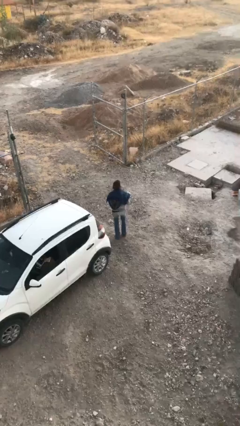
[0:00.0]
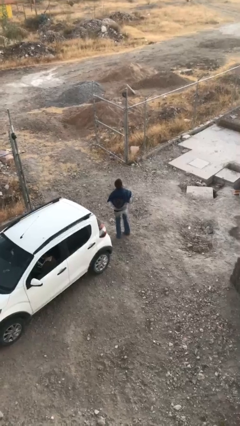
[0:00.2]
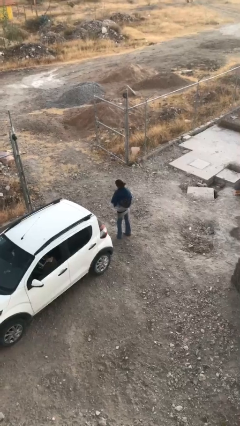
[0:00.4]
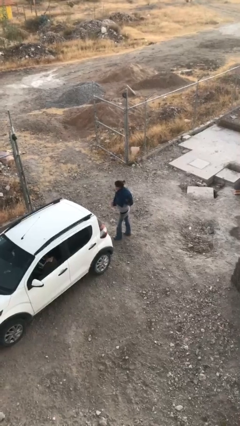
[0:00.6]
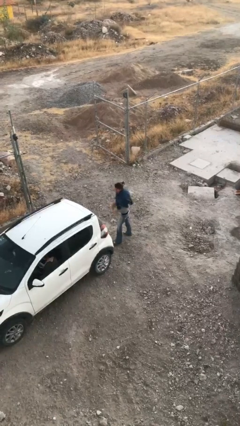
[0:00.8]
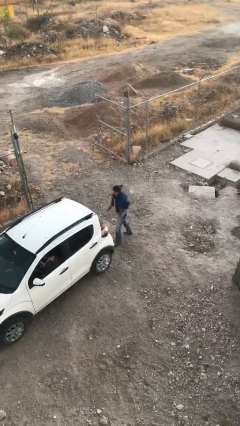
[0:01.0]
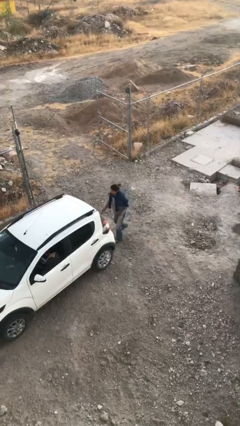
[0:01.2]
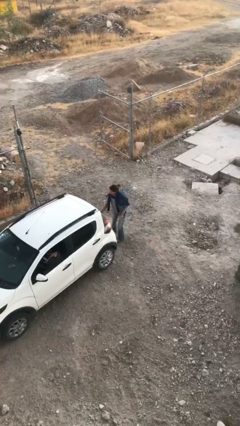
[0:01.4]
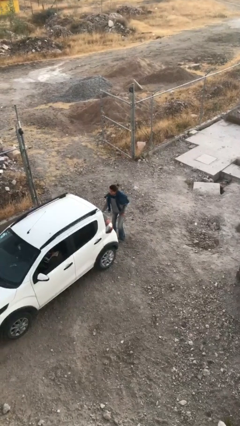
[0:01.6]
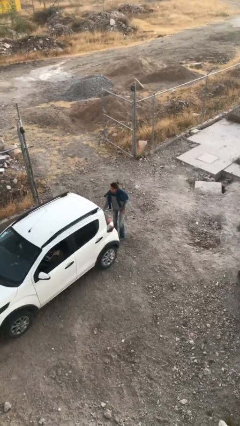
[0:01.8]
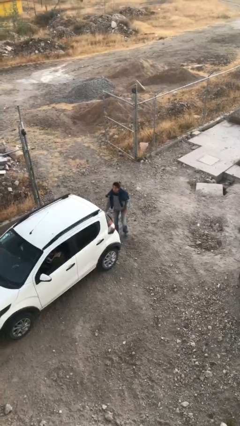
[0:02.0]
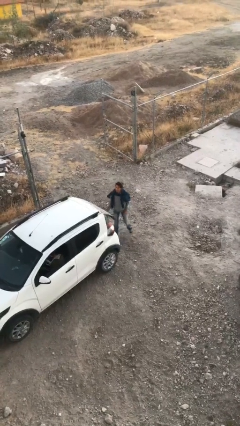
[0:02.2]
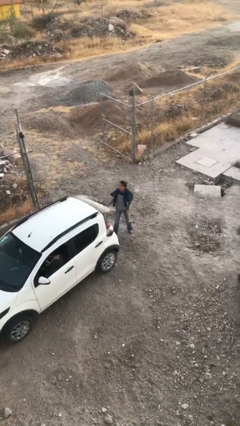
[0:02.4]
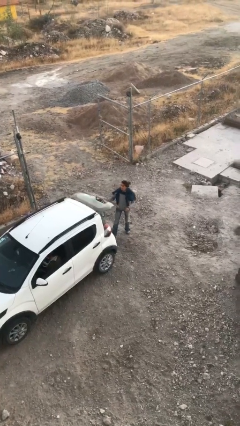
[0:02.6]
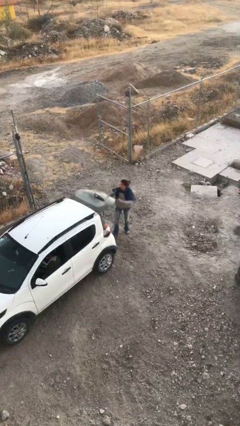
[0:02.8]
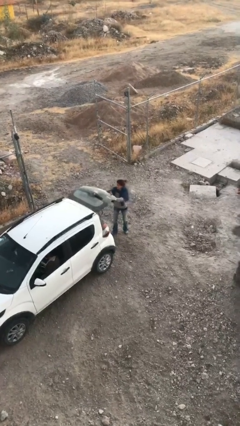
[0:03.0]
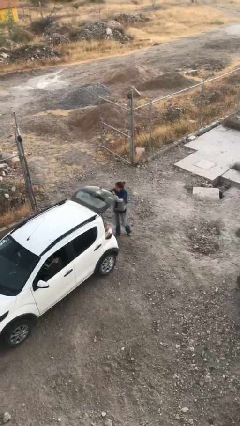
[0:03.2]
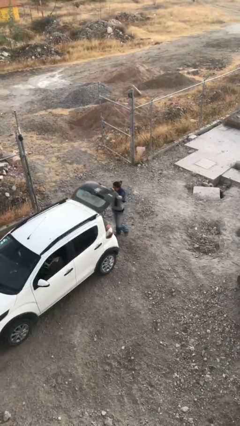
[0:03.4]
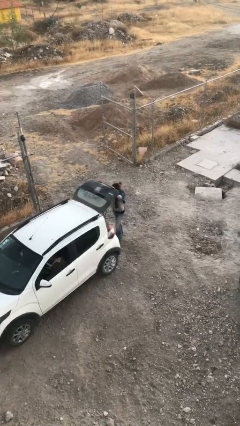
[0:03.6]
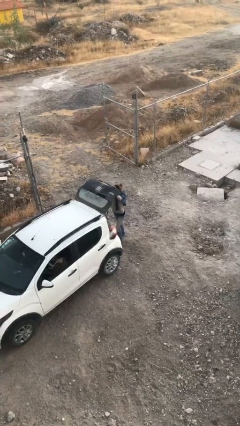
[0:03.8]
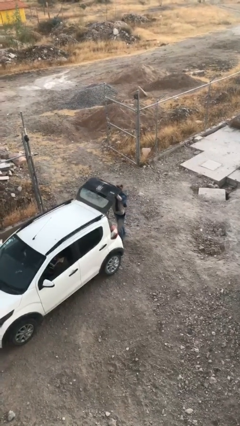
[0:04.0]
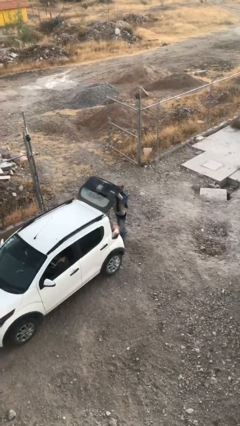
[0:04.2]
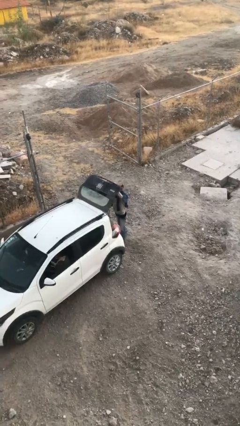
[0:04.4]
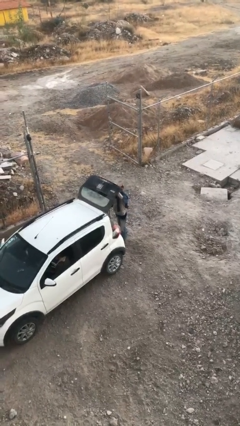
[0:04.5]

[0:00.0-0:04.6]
person opens car trunk

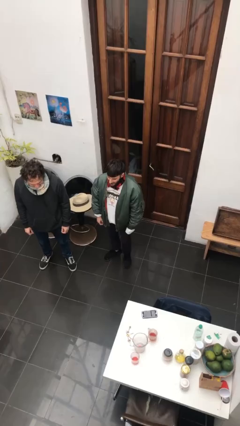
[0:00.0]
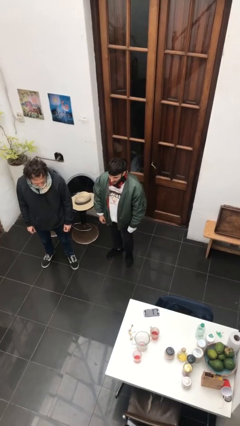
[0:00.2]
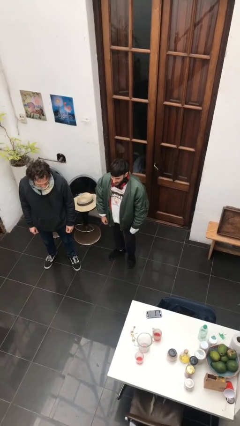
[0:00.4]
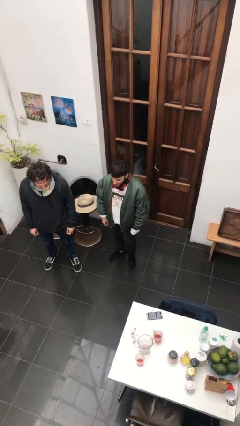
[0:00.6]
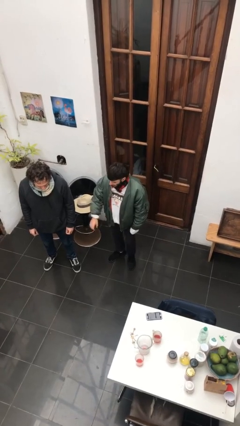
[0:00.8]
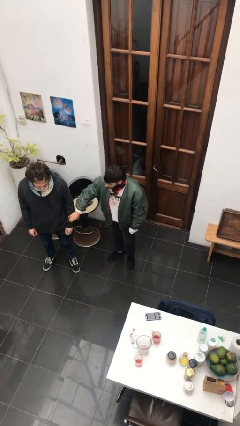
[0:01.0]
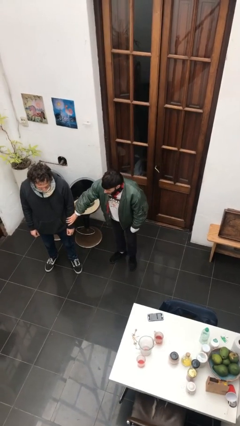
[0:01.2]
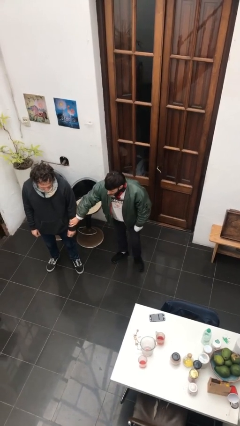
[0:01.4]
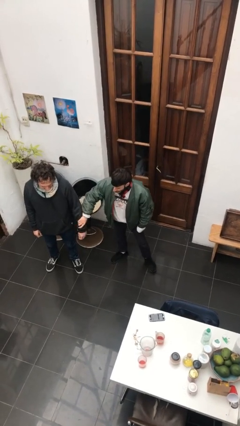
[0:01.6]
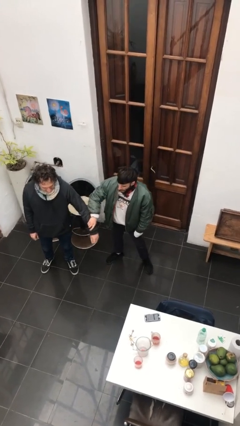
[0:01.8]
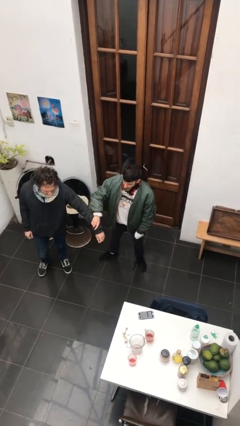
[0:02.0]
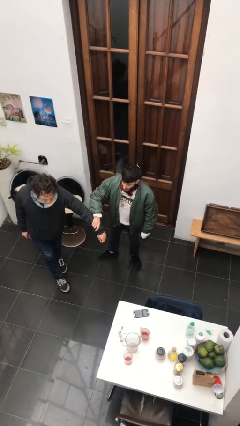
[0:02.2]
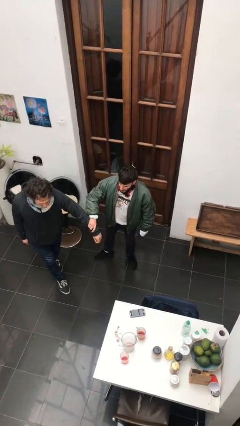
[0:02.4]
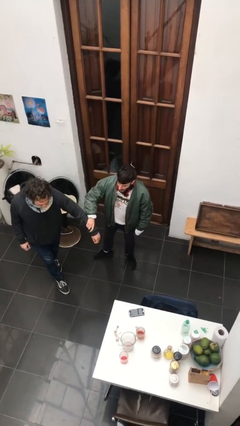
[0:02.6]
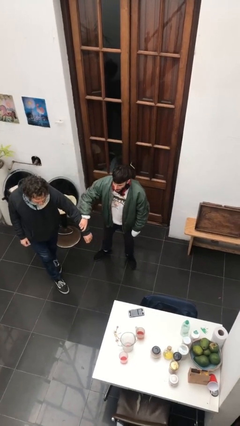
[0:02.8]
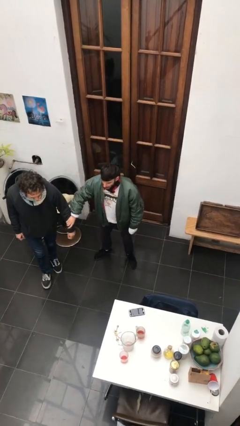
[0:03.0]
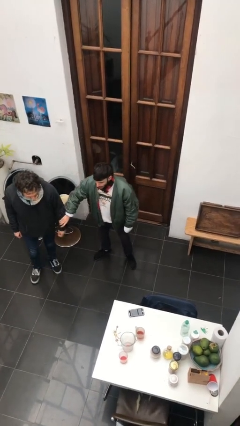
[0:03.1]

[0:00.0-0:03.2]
person grabs person by forearm

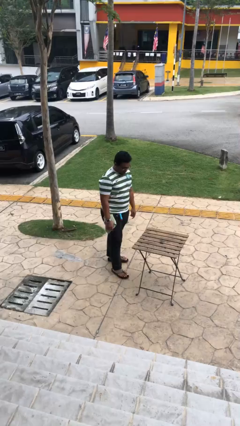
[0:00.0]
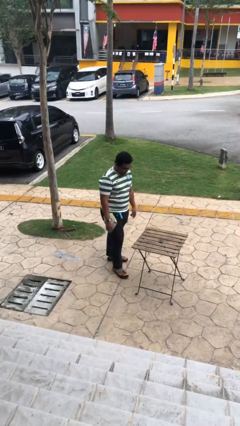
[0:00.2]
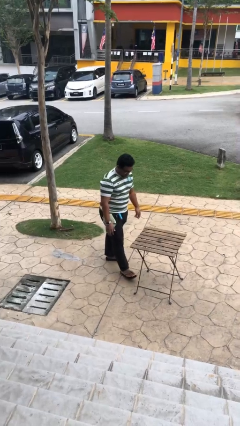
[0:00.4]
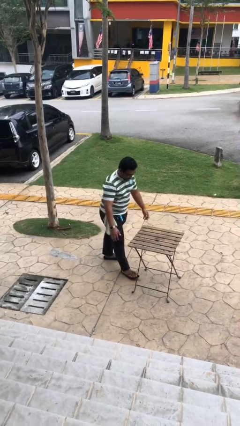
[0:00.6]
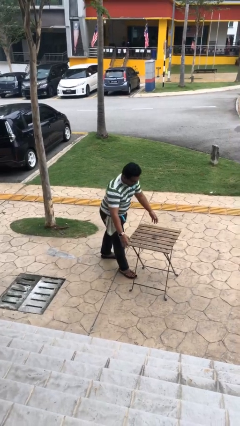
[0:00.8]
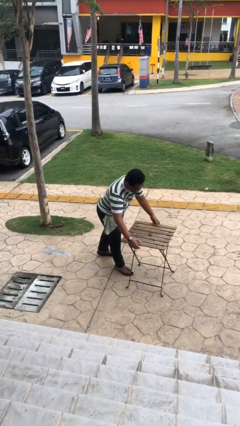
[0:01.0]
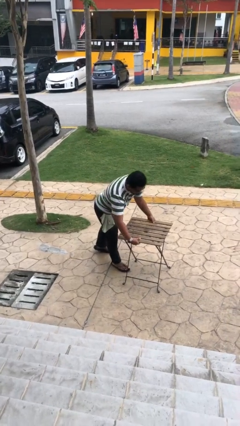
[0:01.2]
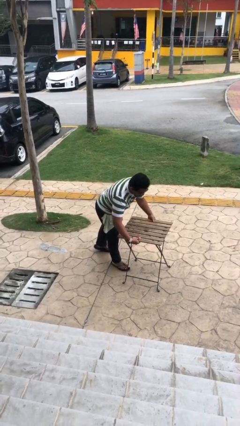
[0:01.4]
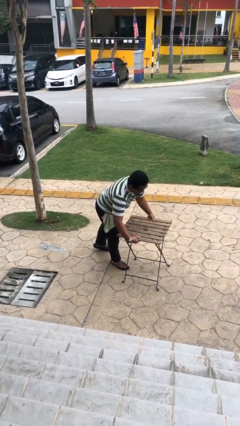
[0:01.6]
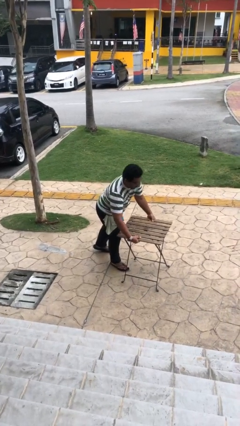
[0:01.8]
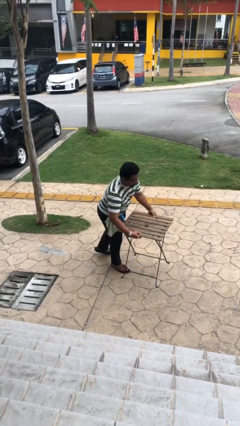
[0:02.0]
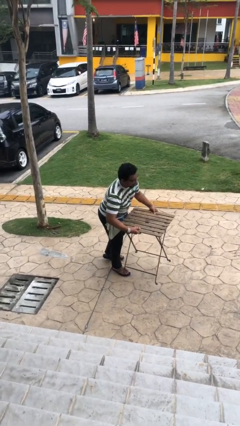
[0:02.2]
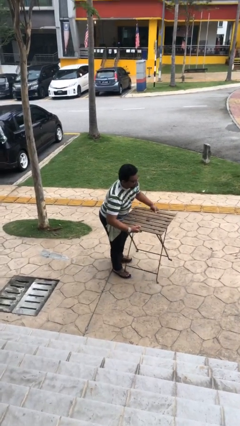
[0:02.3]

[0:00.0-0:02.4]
person picks up object from floor

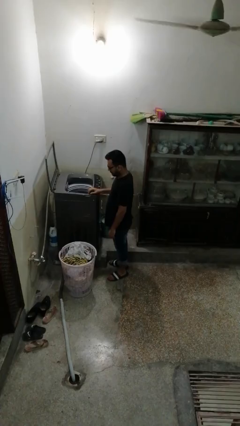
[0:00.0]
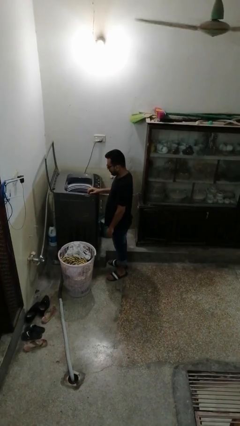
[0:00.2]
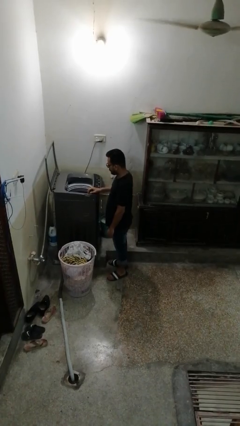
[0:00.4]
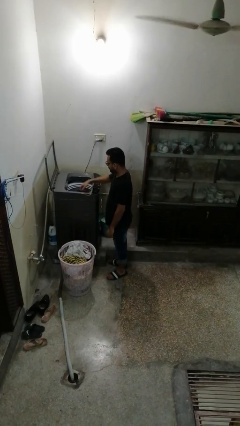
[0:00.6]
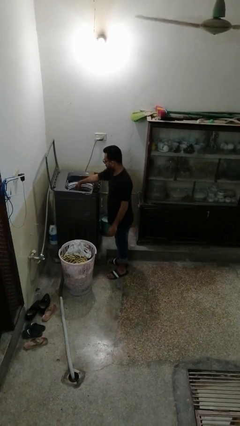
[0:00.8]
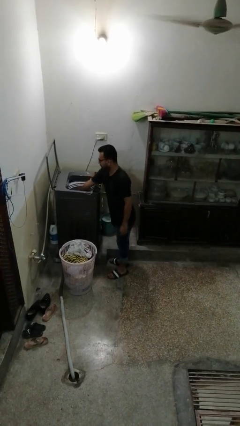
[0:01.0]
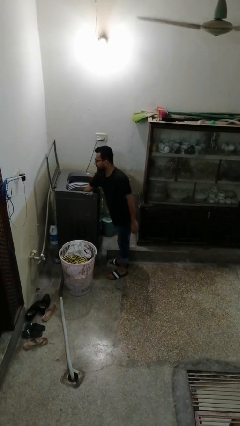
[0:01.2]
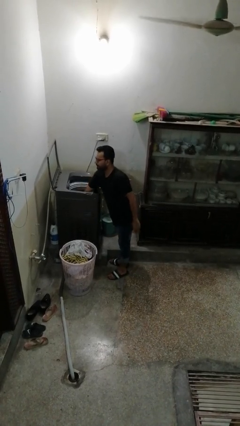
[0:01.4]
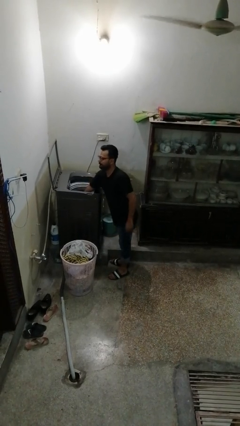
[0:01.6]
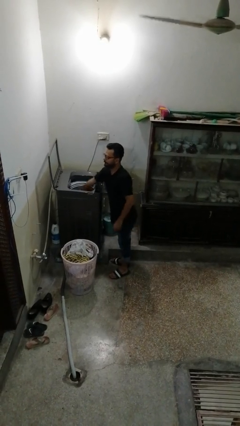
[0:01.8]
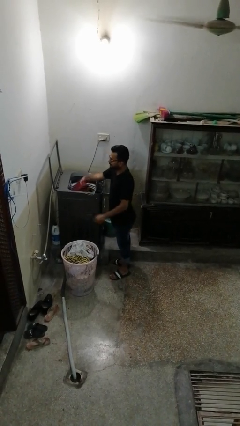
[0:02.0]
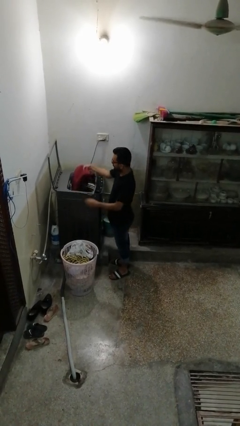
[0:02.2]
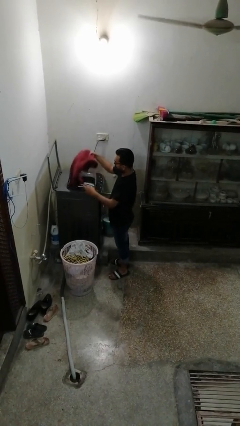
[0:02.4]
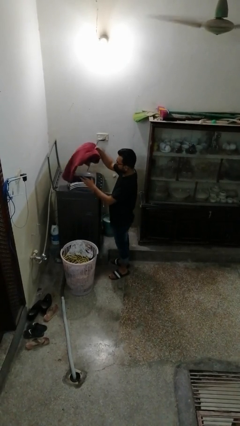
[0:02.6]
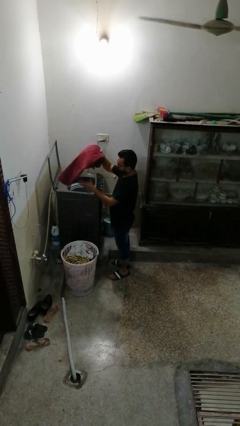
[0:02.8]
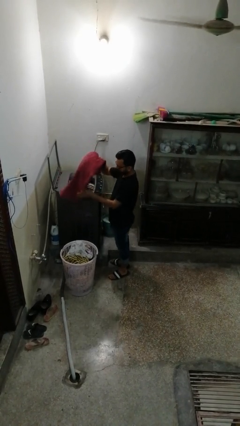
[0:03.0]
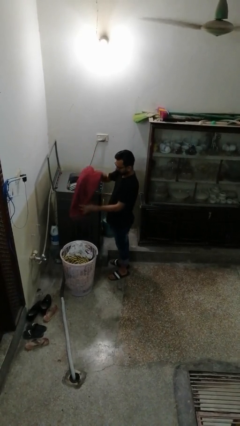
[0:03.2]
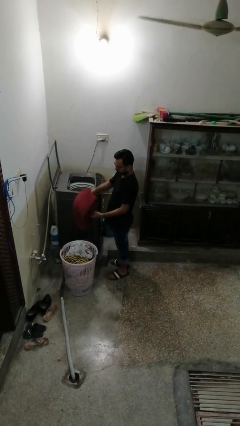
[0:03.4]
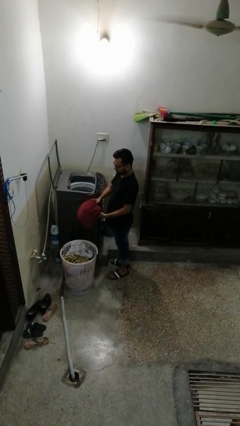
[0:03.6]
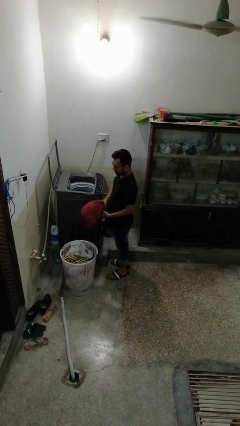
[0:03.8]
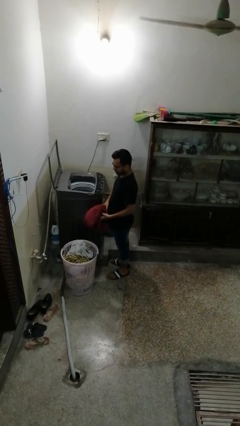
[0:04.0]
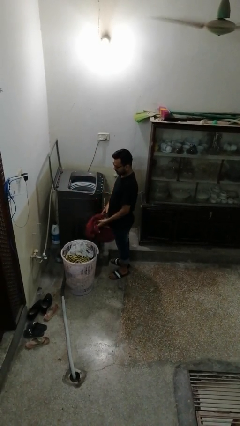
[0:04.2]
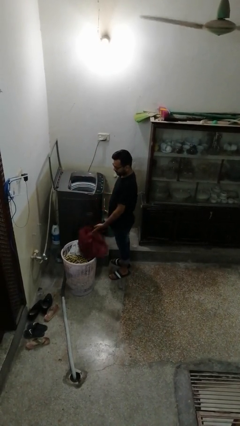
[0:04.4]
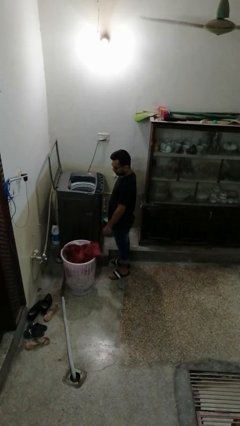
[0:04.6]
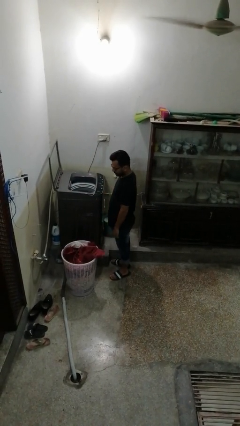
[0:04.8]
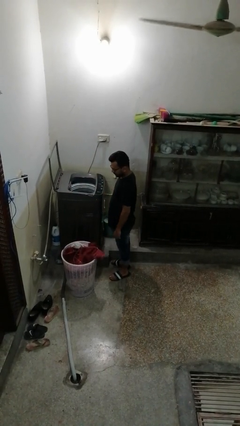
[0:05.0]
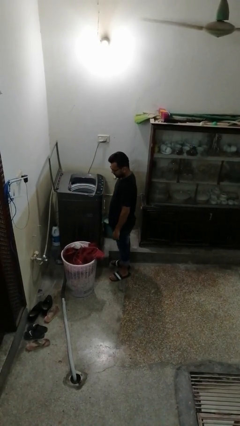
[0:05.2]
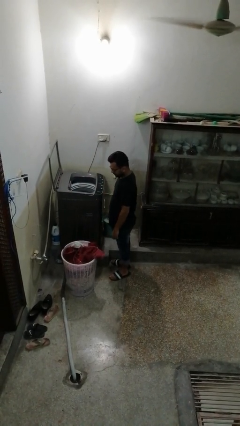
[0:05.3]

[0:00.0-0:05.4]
person unloads clotheswasher

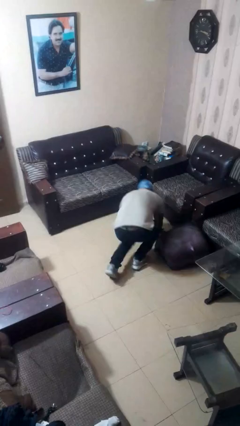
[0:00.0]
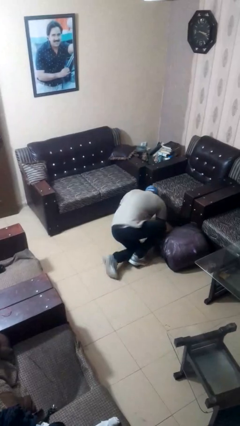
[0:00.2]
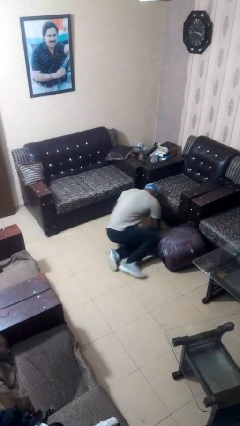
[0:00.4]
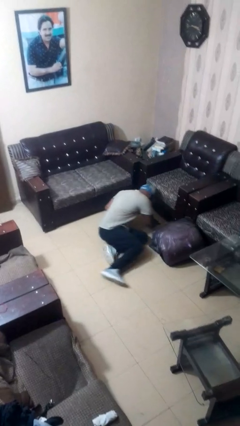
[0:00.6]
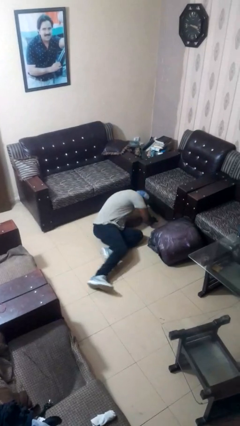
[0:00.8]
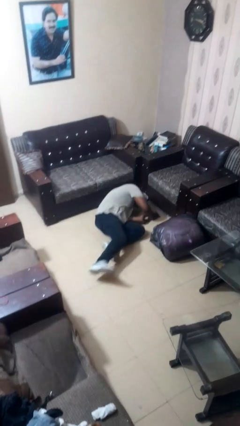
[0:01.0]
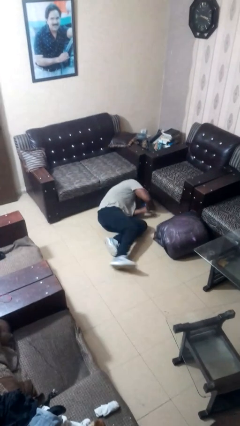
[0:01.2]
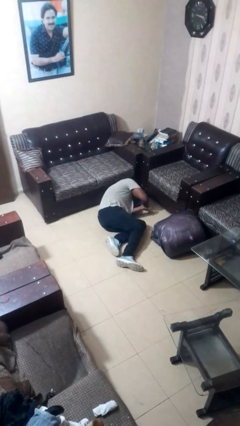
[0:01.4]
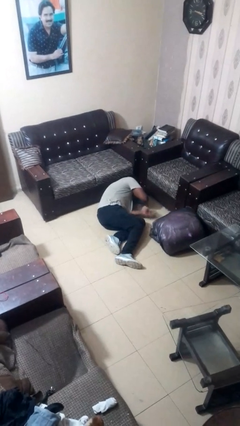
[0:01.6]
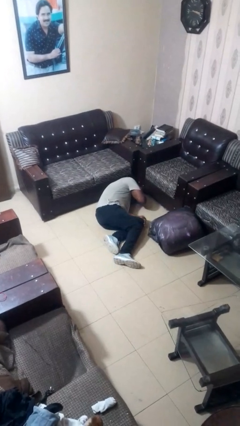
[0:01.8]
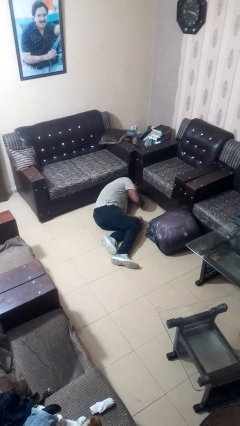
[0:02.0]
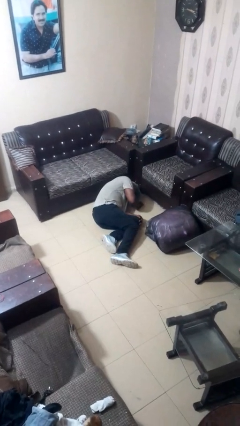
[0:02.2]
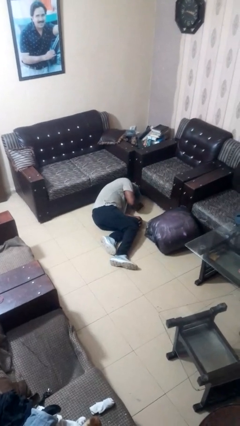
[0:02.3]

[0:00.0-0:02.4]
person lies down on floor
